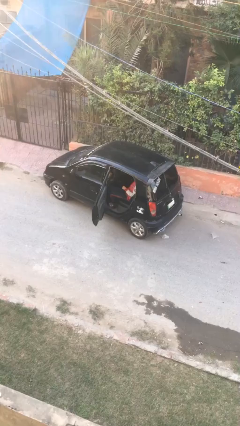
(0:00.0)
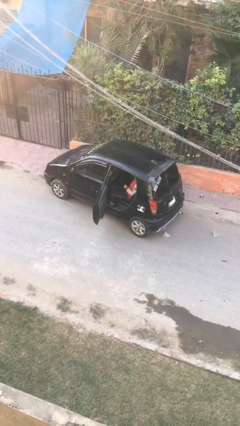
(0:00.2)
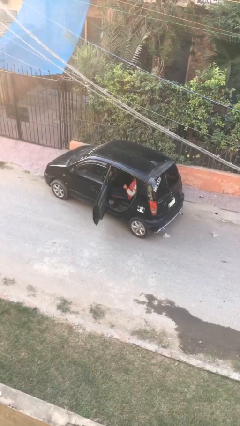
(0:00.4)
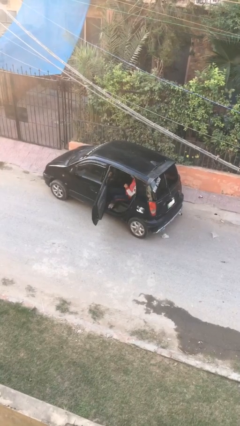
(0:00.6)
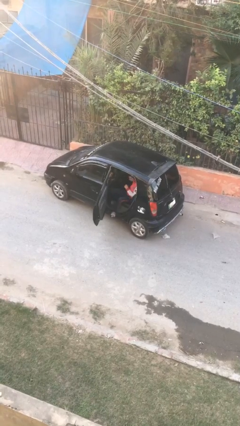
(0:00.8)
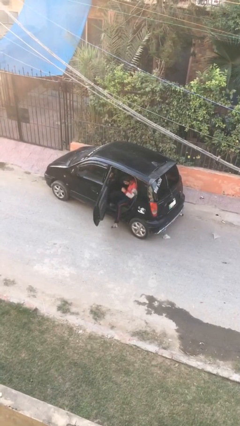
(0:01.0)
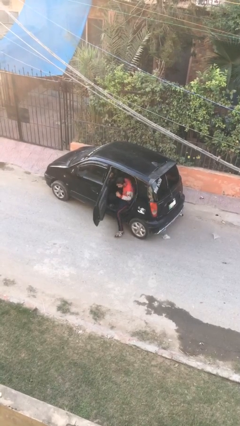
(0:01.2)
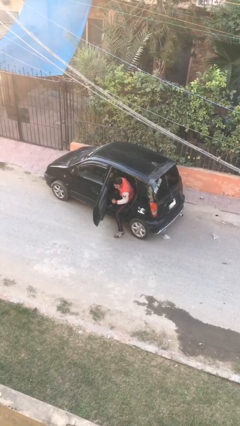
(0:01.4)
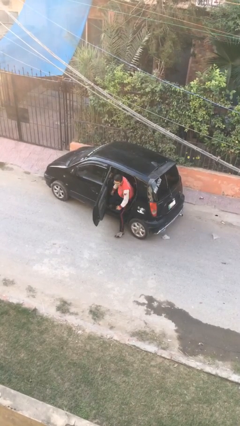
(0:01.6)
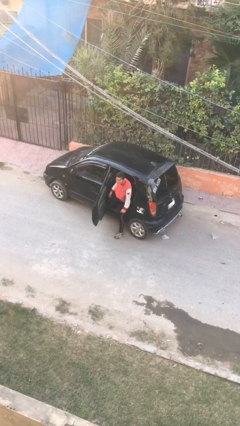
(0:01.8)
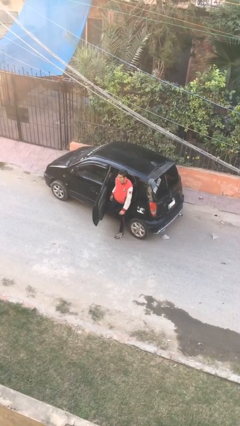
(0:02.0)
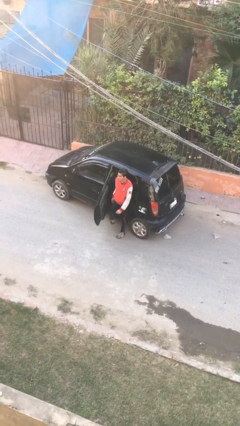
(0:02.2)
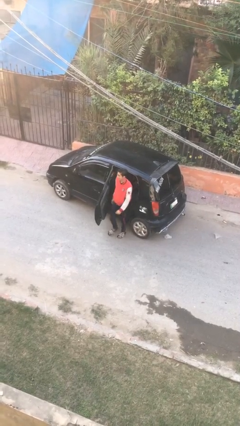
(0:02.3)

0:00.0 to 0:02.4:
person exits car

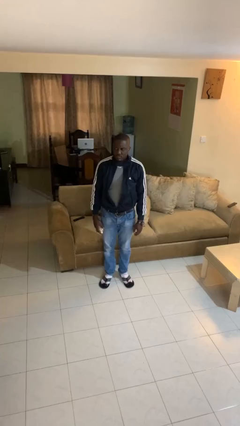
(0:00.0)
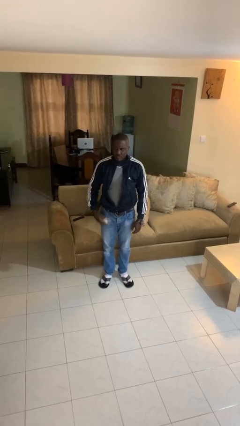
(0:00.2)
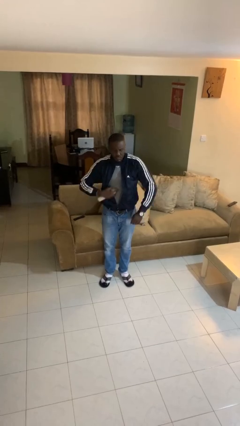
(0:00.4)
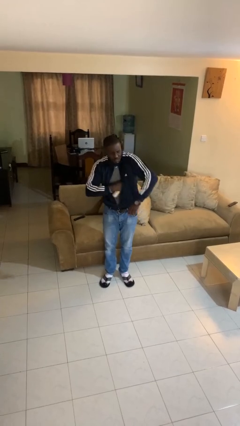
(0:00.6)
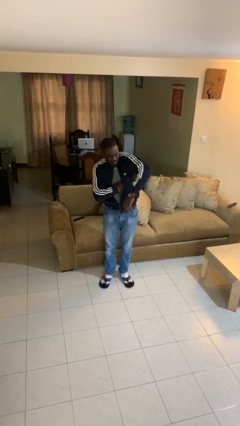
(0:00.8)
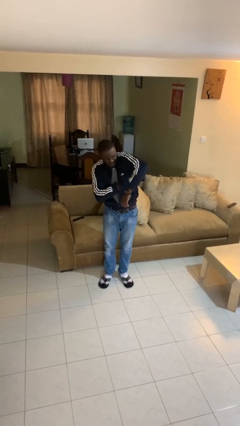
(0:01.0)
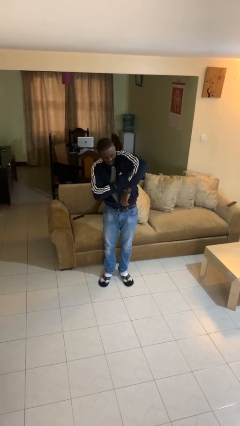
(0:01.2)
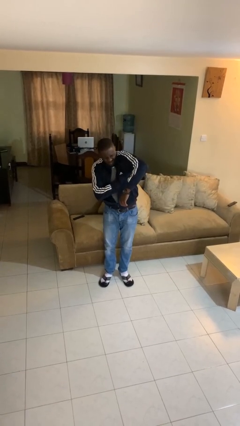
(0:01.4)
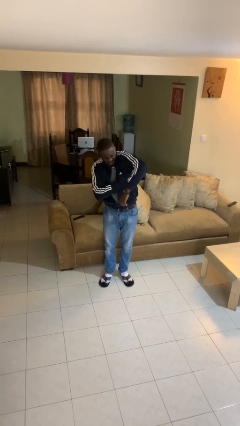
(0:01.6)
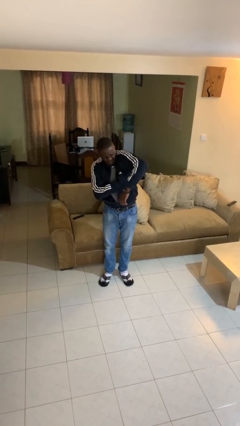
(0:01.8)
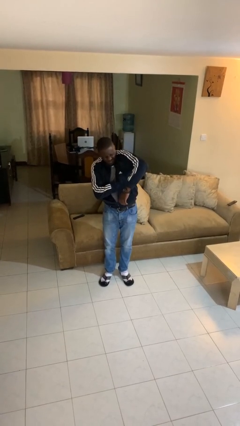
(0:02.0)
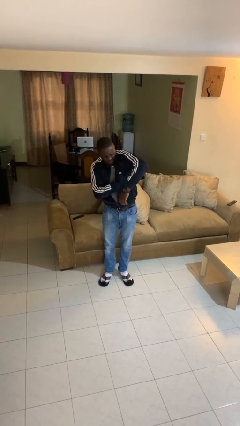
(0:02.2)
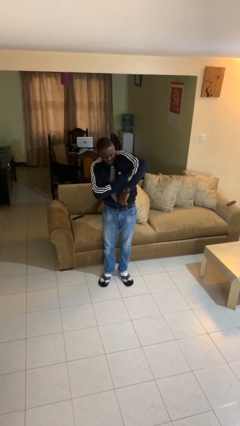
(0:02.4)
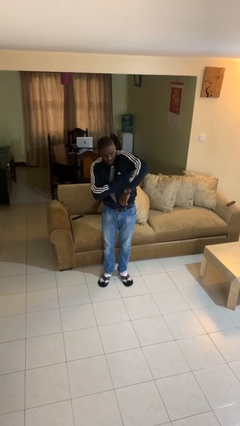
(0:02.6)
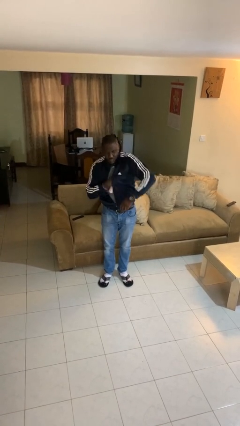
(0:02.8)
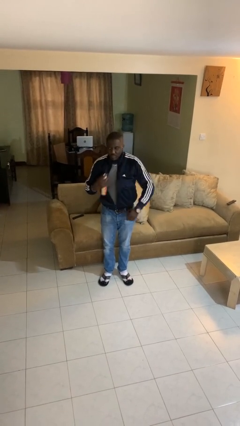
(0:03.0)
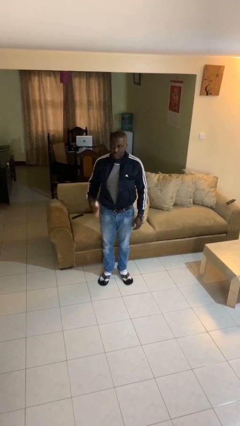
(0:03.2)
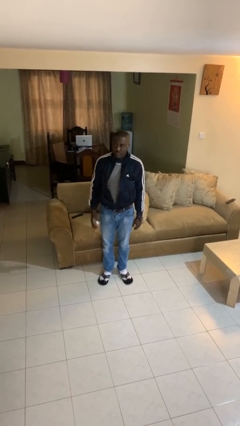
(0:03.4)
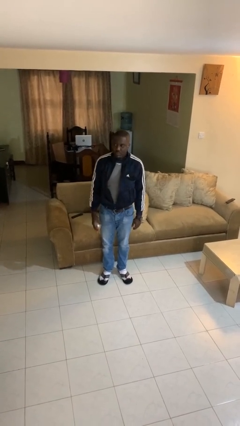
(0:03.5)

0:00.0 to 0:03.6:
person applies deodorant

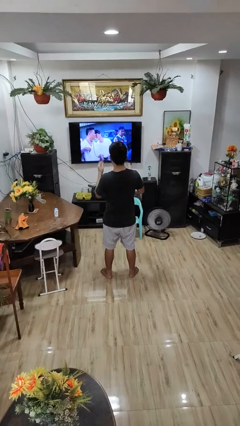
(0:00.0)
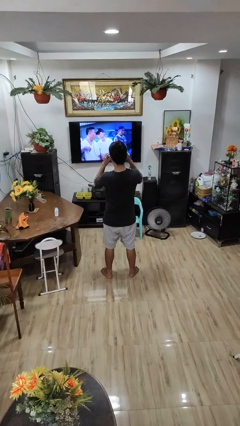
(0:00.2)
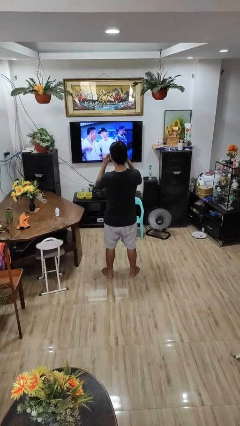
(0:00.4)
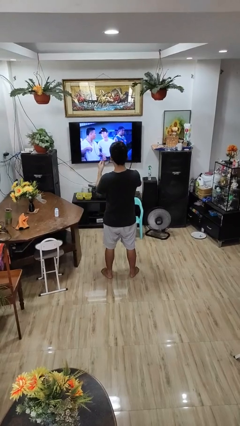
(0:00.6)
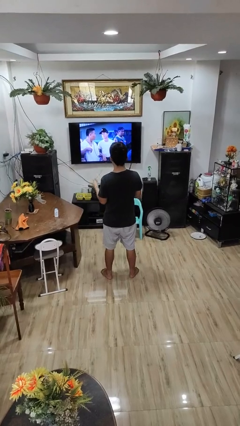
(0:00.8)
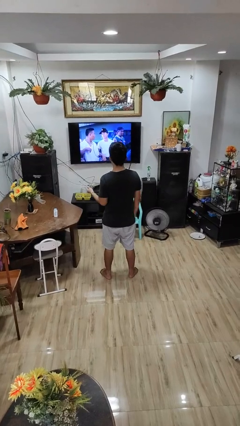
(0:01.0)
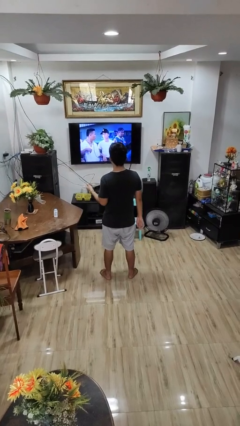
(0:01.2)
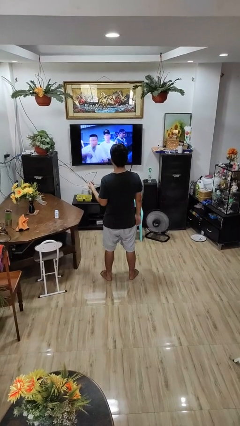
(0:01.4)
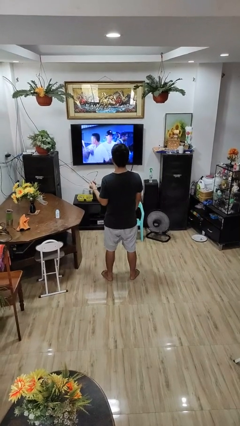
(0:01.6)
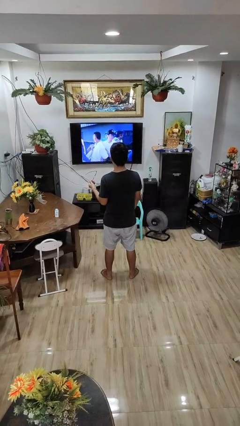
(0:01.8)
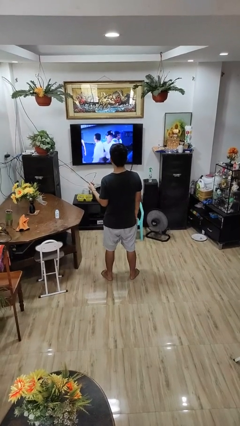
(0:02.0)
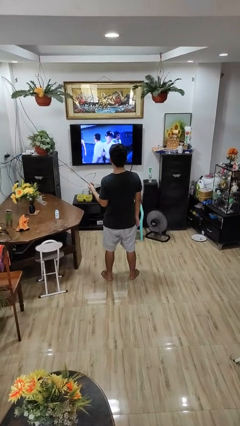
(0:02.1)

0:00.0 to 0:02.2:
person takes off glasses

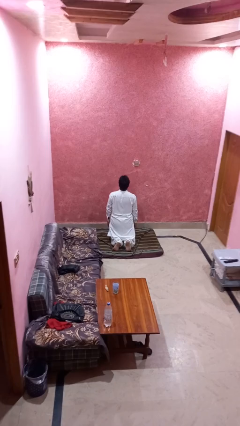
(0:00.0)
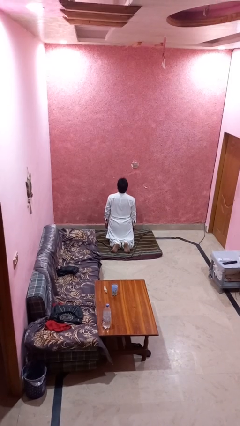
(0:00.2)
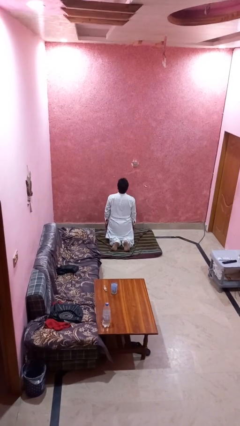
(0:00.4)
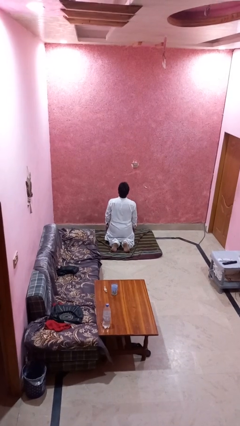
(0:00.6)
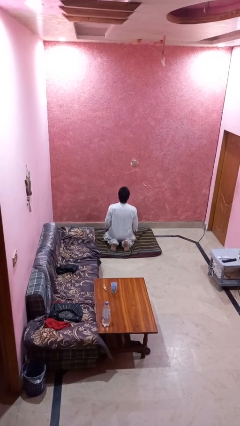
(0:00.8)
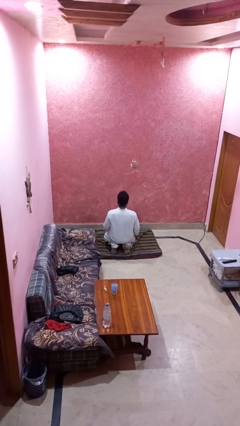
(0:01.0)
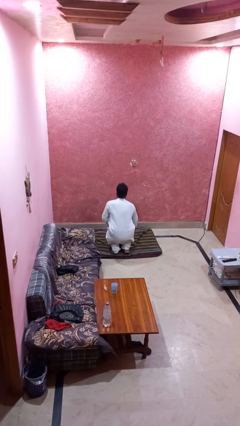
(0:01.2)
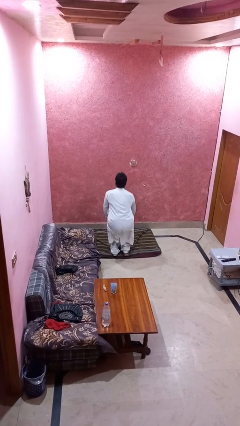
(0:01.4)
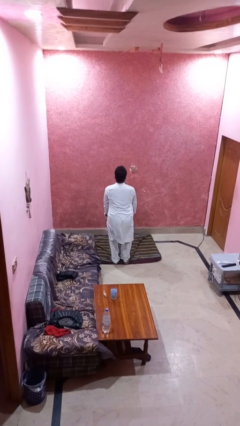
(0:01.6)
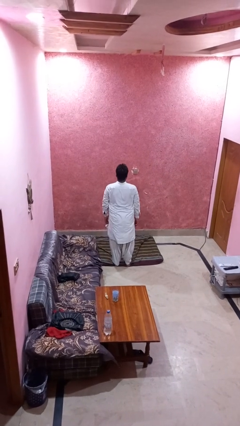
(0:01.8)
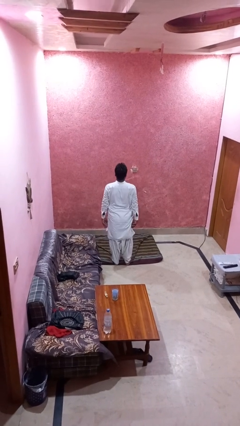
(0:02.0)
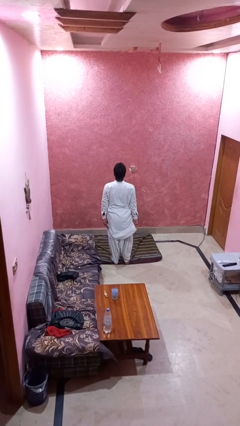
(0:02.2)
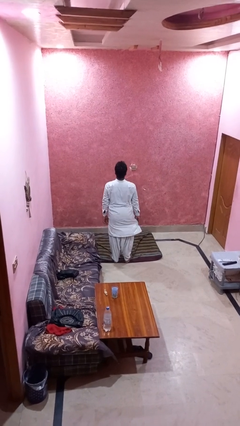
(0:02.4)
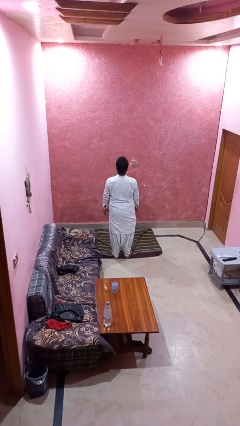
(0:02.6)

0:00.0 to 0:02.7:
person stands up from floor

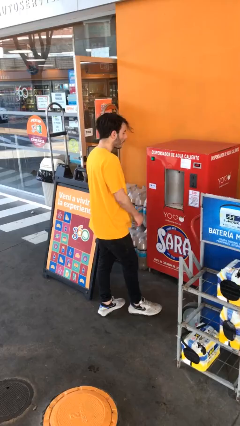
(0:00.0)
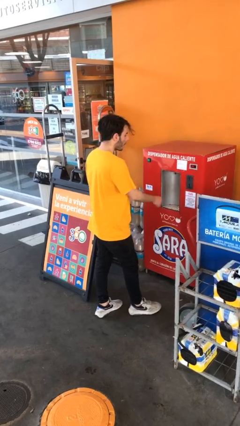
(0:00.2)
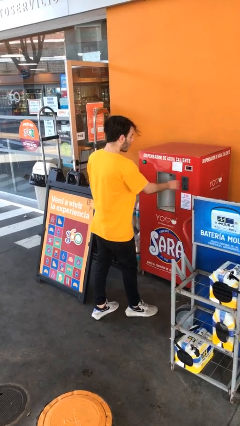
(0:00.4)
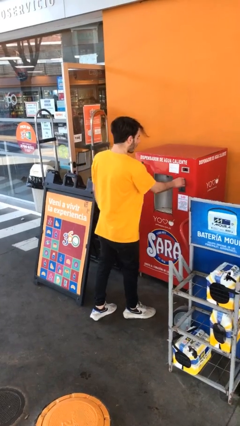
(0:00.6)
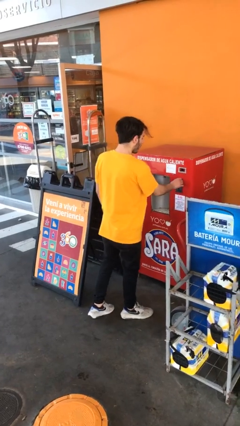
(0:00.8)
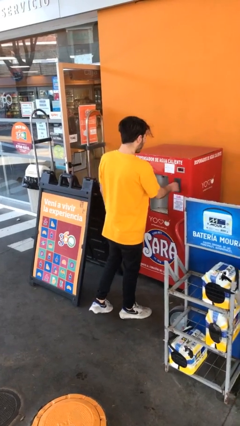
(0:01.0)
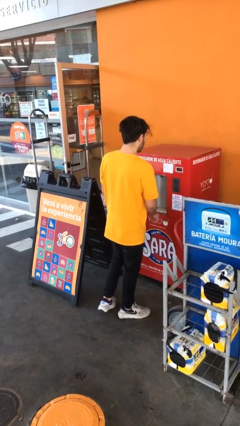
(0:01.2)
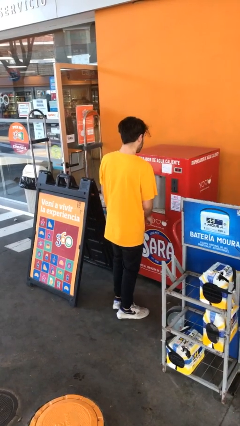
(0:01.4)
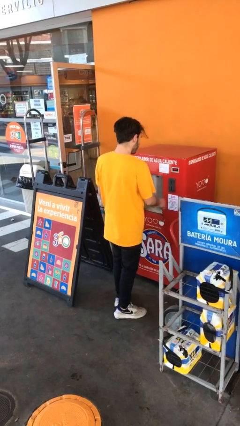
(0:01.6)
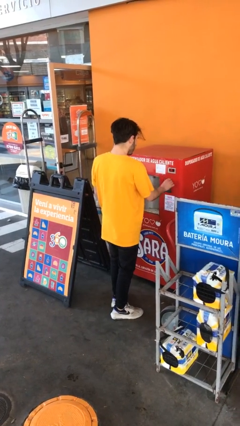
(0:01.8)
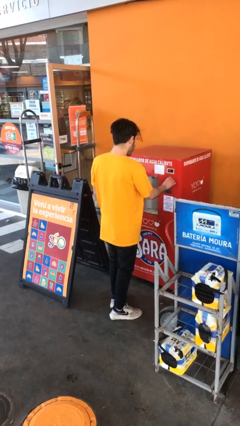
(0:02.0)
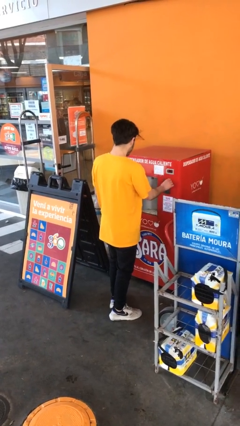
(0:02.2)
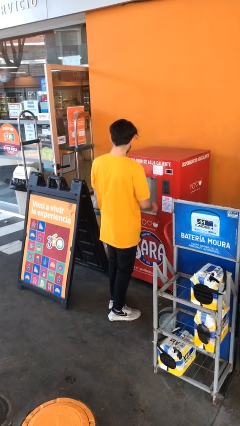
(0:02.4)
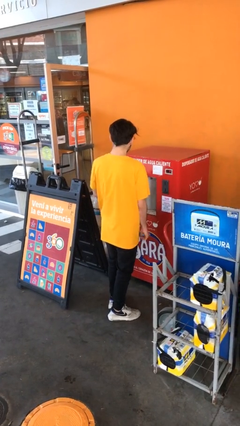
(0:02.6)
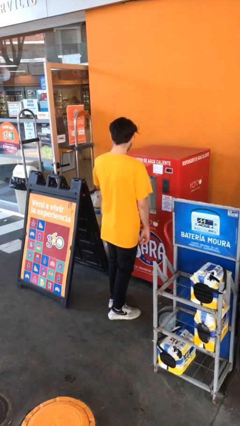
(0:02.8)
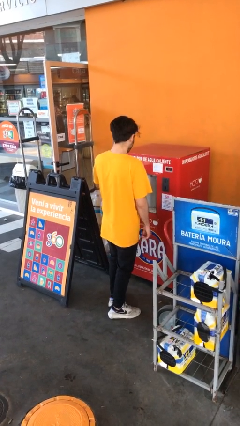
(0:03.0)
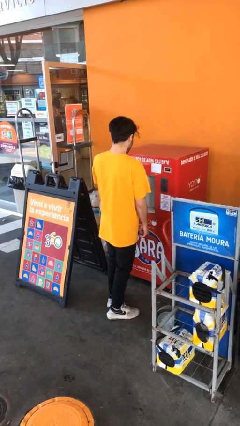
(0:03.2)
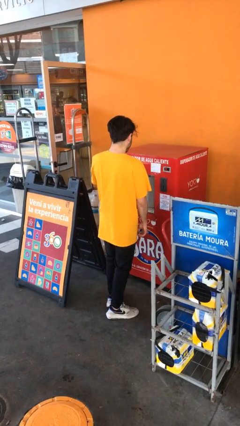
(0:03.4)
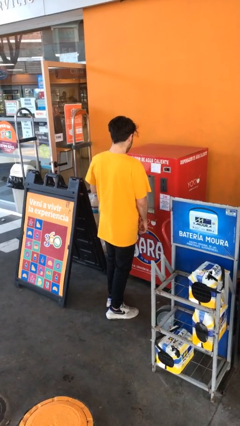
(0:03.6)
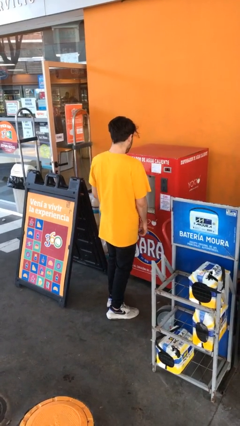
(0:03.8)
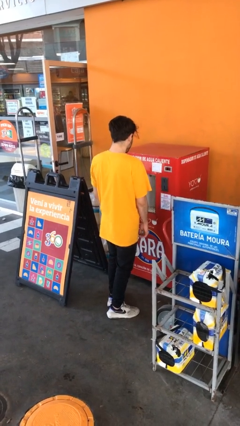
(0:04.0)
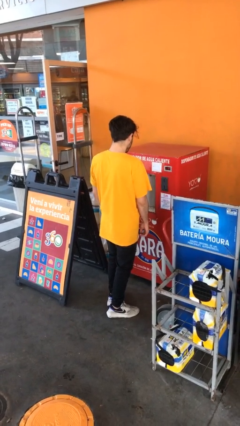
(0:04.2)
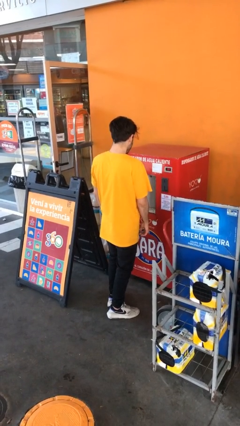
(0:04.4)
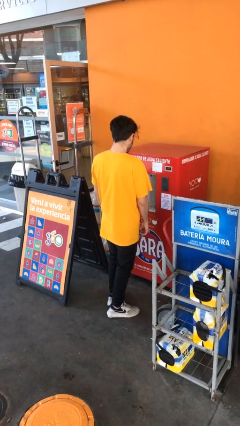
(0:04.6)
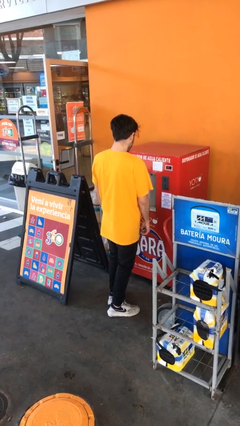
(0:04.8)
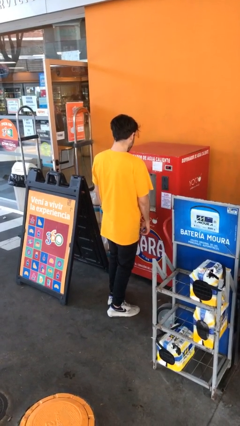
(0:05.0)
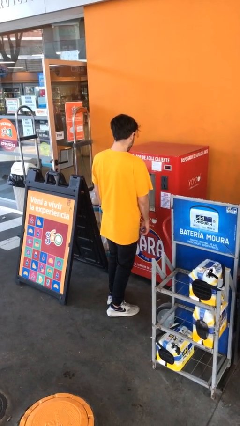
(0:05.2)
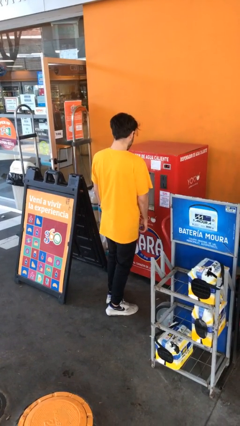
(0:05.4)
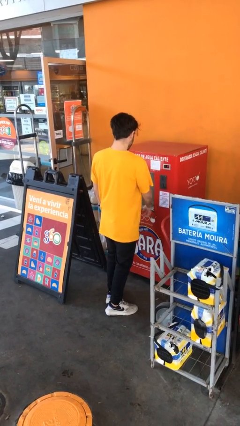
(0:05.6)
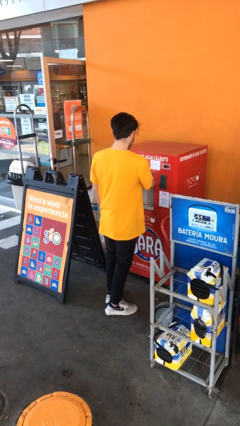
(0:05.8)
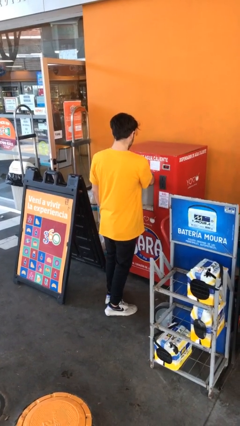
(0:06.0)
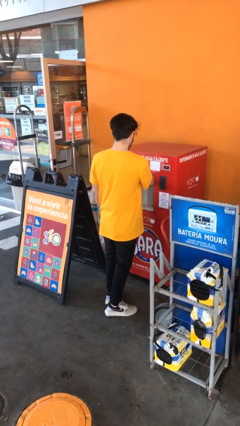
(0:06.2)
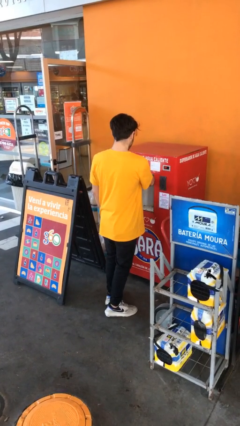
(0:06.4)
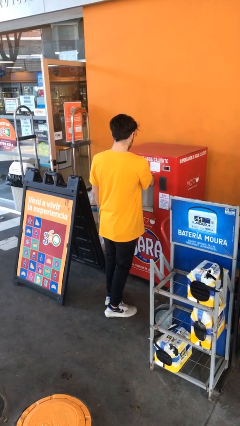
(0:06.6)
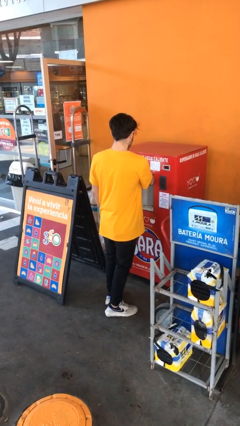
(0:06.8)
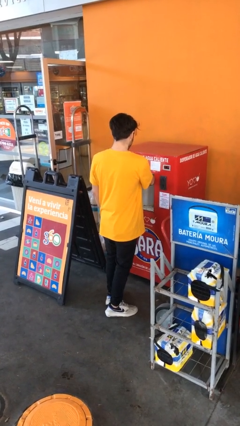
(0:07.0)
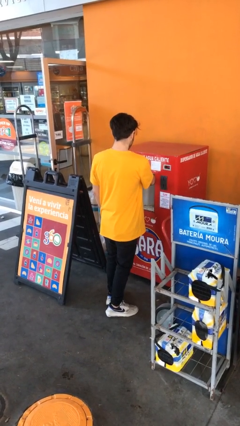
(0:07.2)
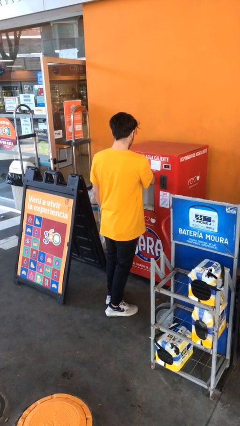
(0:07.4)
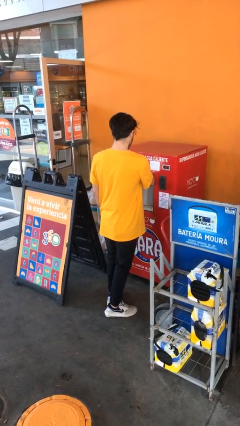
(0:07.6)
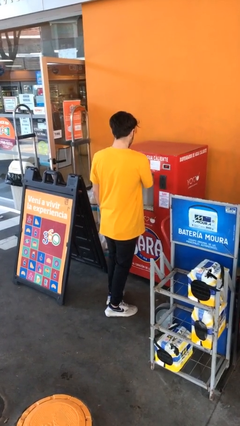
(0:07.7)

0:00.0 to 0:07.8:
person purchases from machine
